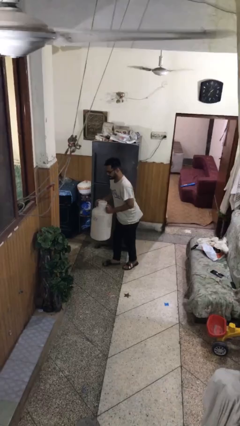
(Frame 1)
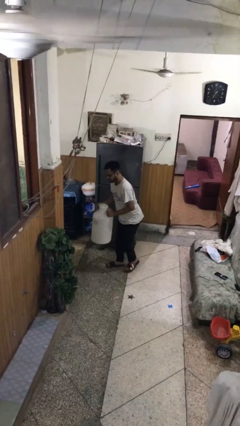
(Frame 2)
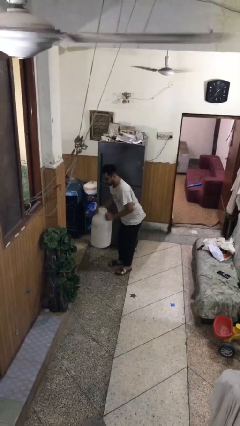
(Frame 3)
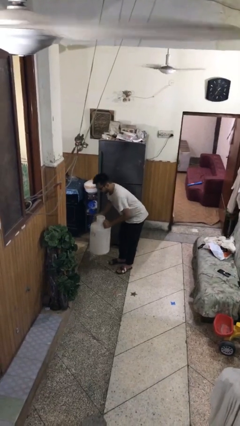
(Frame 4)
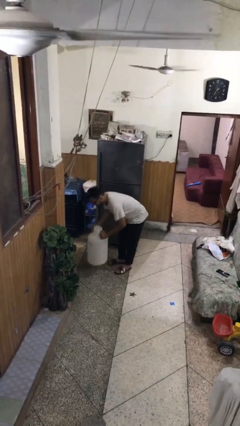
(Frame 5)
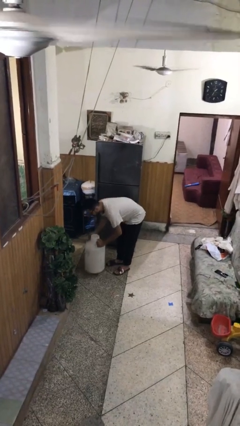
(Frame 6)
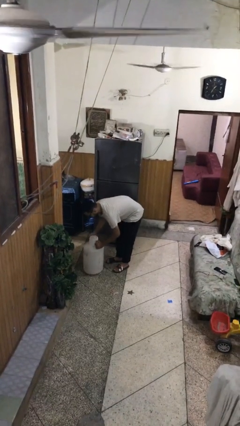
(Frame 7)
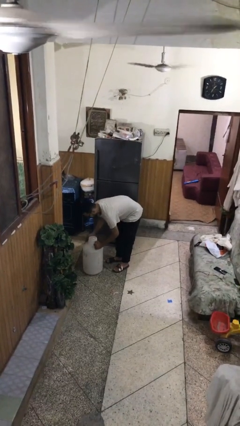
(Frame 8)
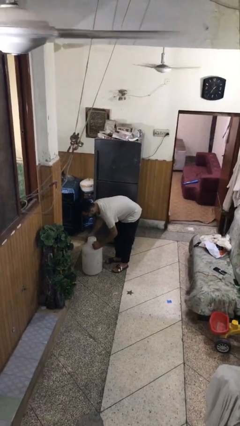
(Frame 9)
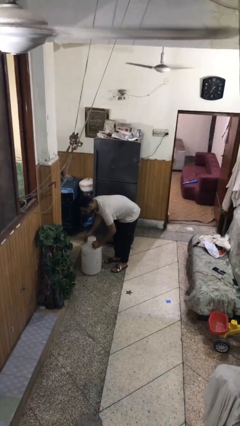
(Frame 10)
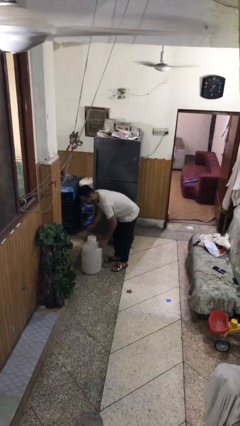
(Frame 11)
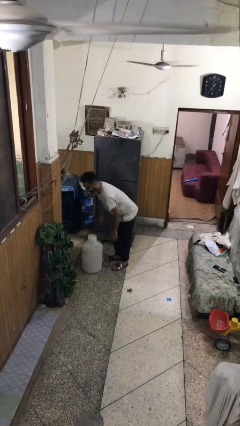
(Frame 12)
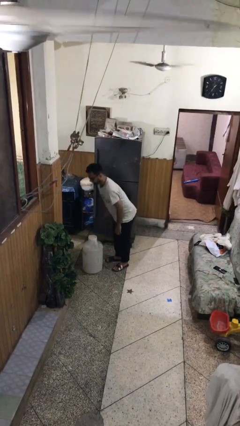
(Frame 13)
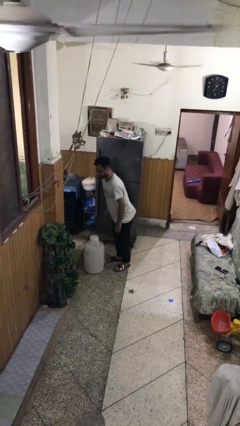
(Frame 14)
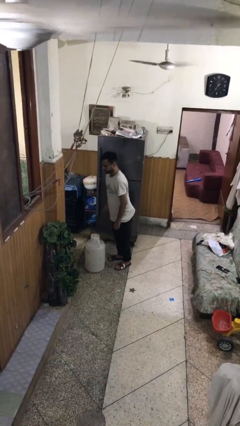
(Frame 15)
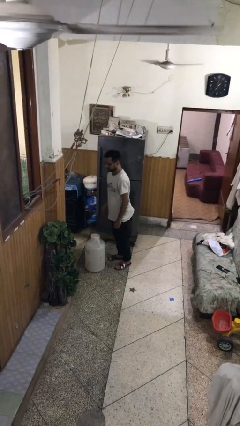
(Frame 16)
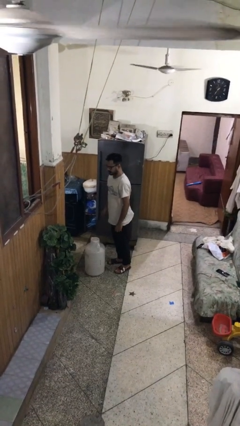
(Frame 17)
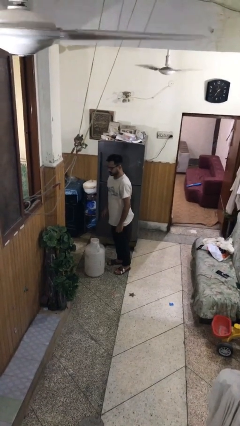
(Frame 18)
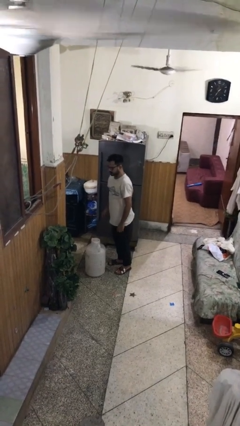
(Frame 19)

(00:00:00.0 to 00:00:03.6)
person puts down object on floor

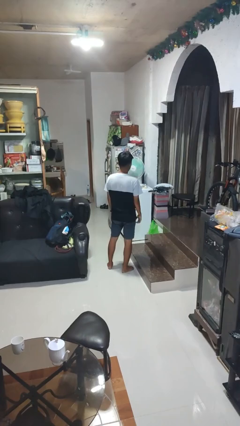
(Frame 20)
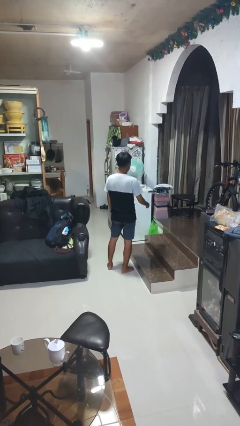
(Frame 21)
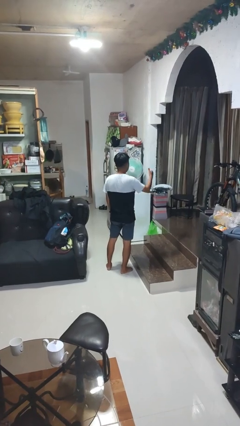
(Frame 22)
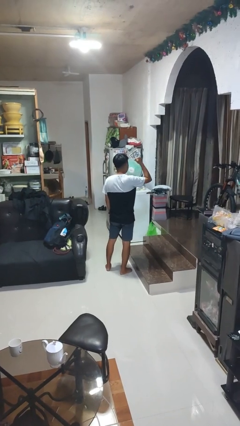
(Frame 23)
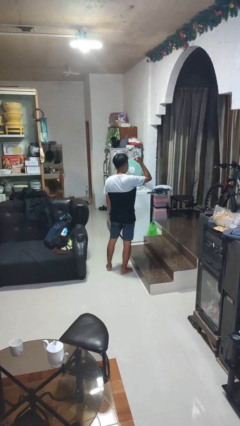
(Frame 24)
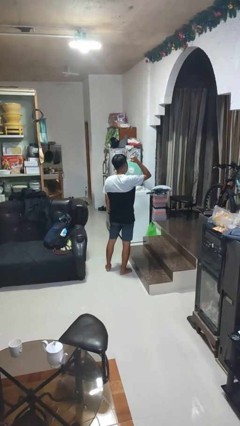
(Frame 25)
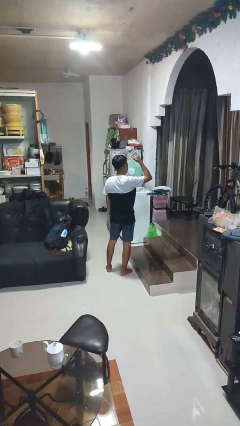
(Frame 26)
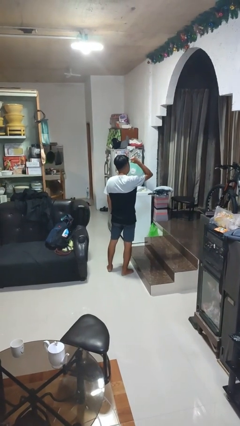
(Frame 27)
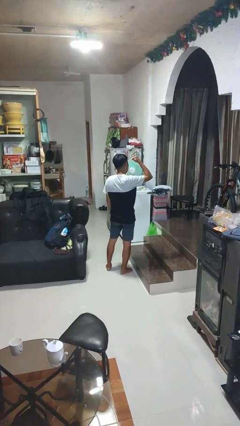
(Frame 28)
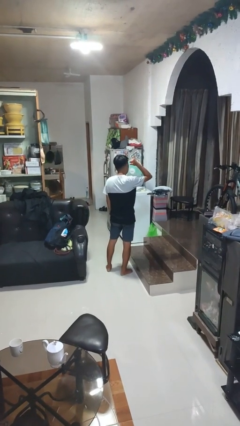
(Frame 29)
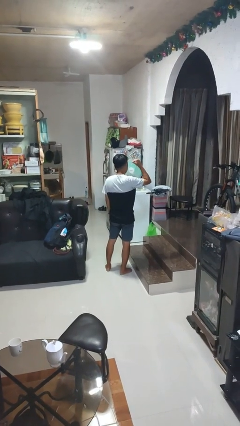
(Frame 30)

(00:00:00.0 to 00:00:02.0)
person gestures behind me

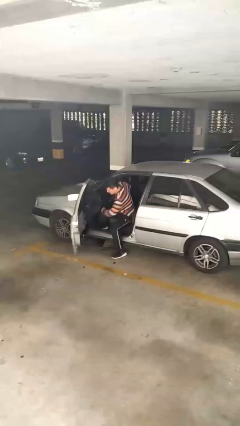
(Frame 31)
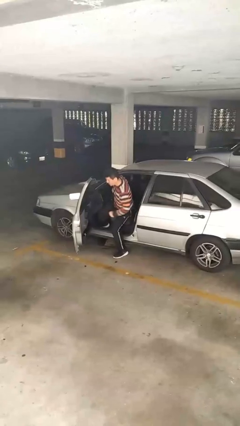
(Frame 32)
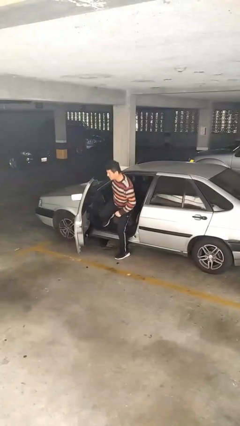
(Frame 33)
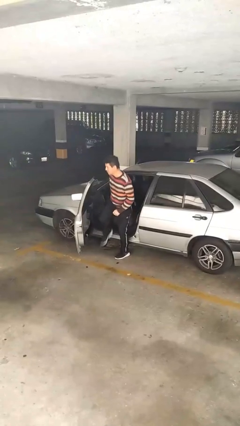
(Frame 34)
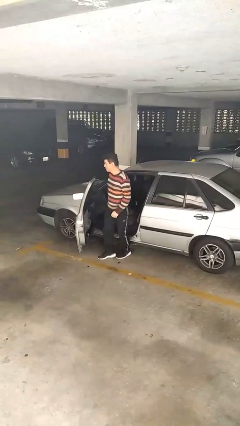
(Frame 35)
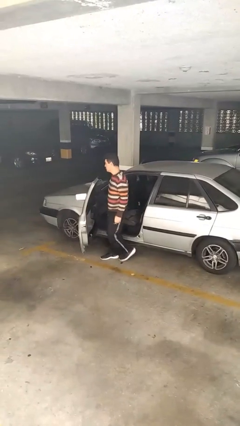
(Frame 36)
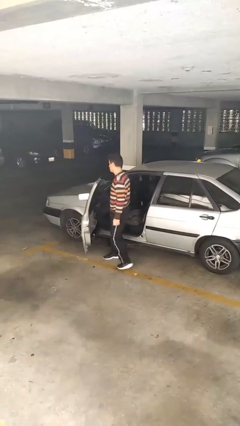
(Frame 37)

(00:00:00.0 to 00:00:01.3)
person exits car

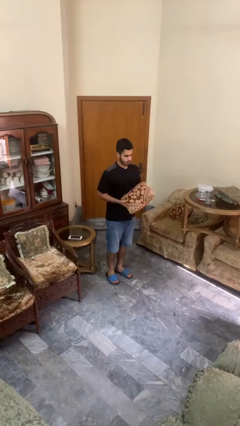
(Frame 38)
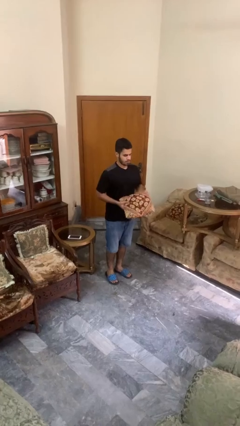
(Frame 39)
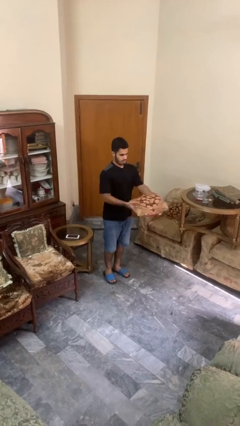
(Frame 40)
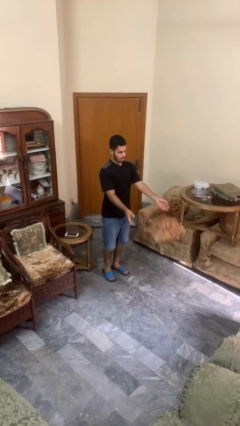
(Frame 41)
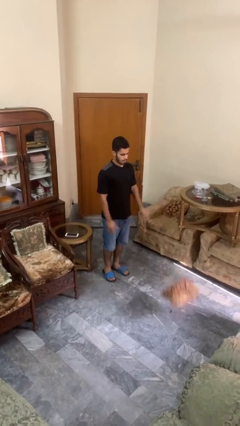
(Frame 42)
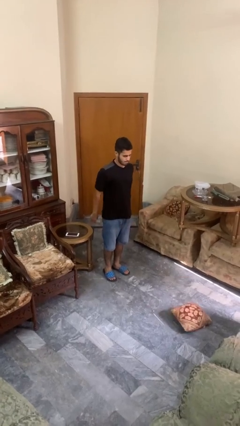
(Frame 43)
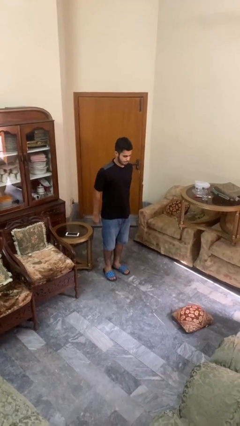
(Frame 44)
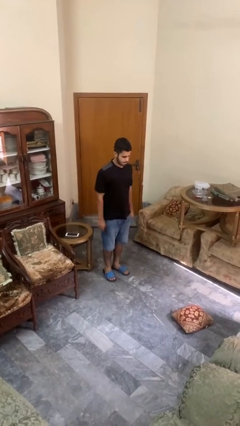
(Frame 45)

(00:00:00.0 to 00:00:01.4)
person throws object to ground

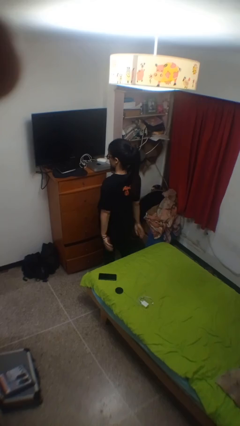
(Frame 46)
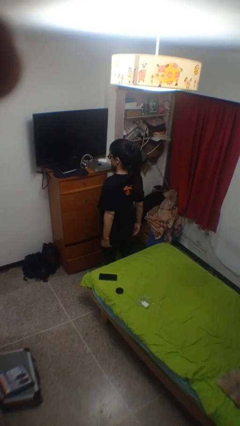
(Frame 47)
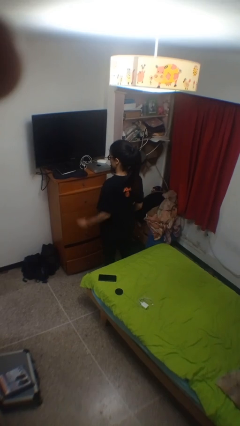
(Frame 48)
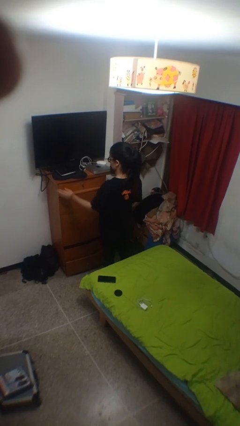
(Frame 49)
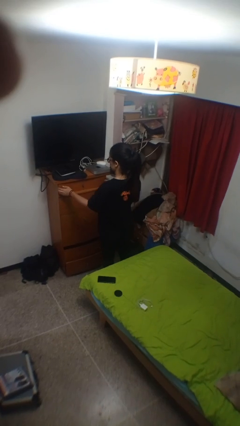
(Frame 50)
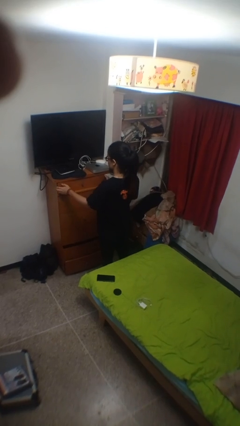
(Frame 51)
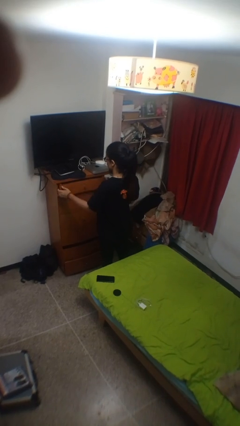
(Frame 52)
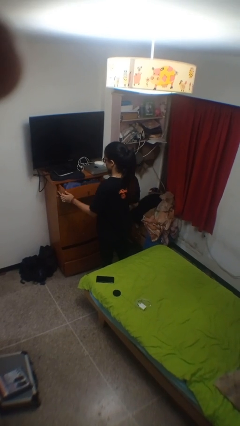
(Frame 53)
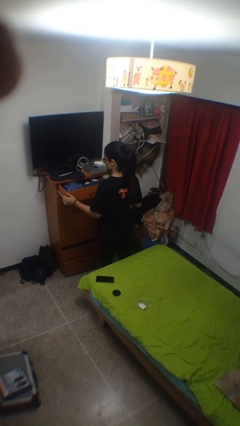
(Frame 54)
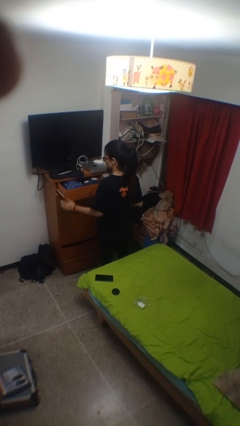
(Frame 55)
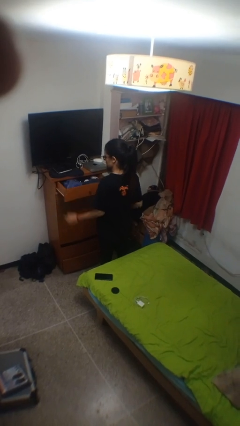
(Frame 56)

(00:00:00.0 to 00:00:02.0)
person opens dresser drawer

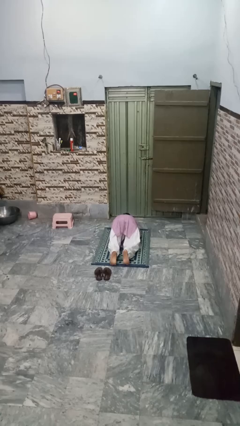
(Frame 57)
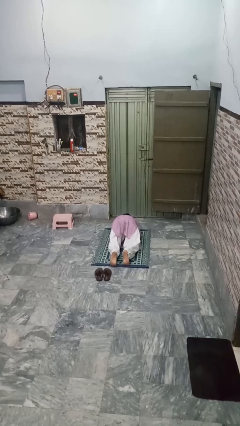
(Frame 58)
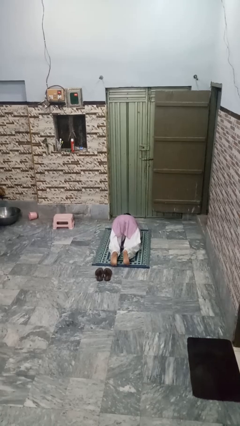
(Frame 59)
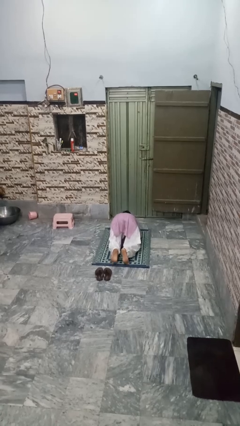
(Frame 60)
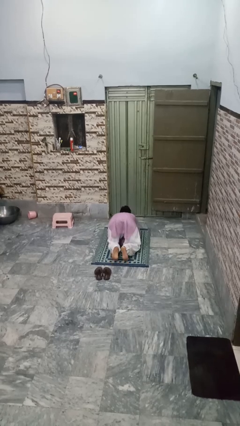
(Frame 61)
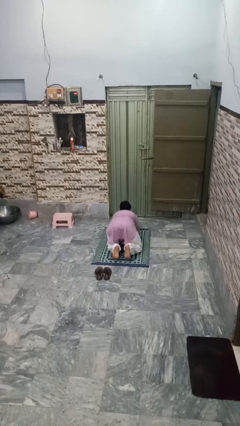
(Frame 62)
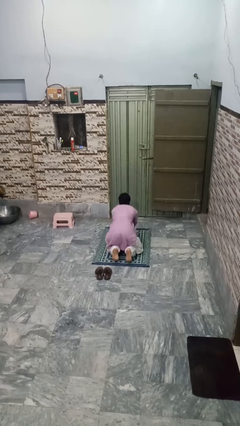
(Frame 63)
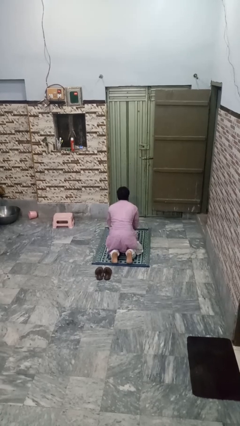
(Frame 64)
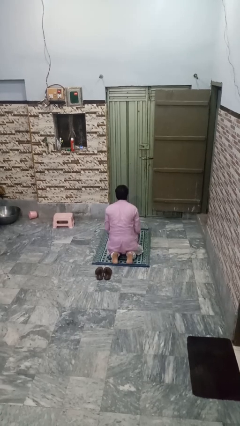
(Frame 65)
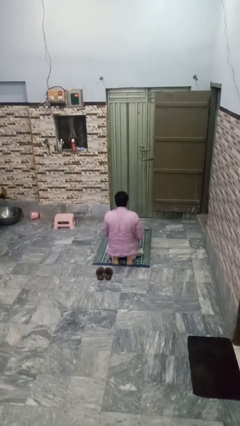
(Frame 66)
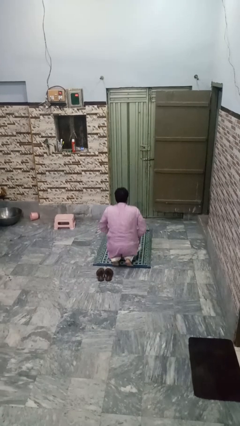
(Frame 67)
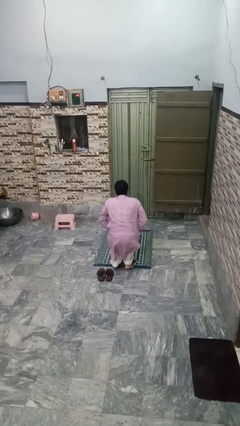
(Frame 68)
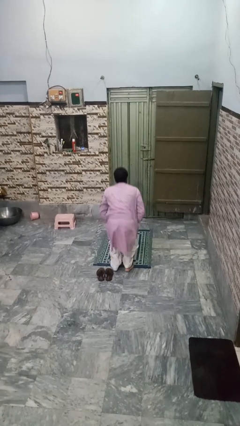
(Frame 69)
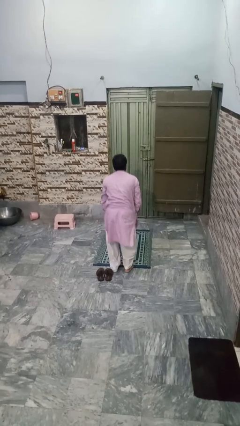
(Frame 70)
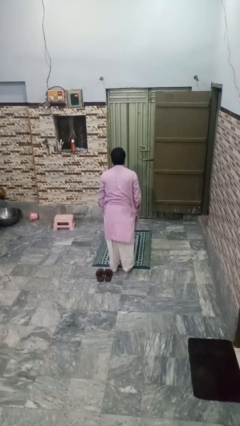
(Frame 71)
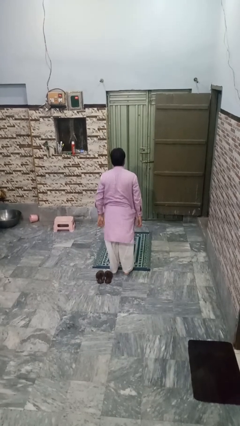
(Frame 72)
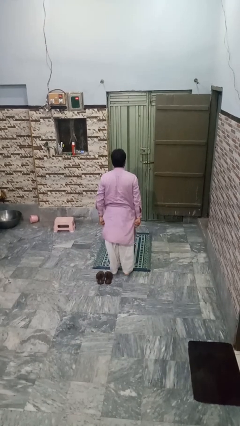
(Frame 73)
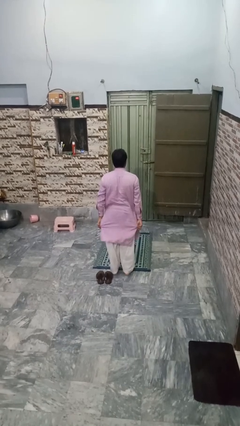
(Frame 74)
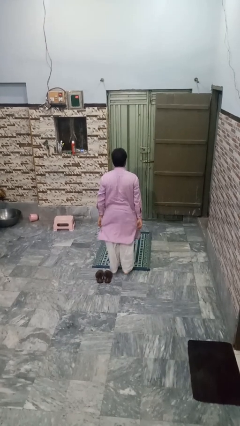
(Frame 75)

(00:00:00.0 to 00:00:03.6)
person stands up from floor

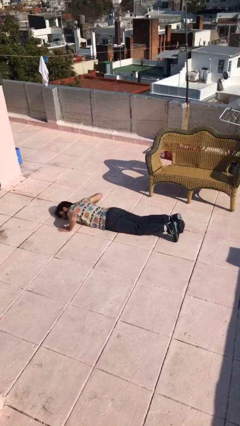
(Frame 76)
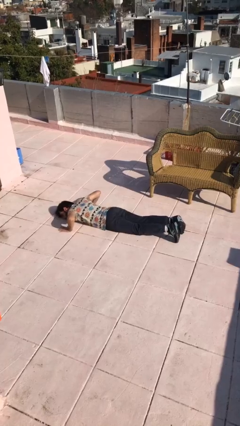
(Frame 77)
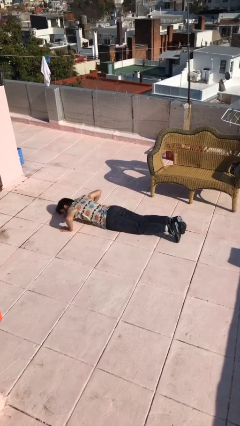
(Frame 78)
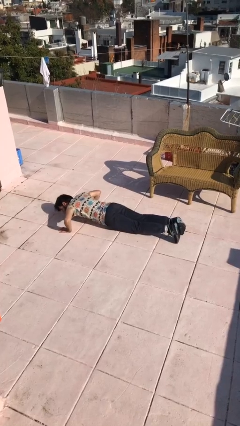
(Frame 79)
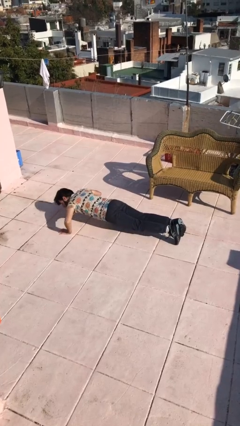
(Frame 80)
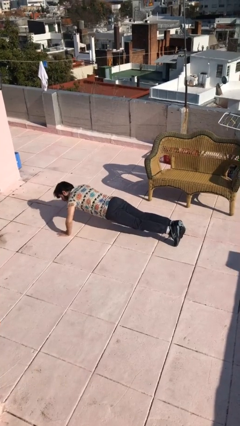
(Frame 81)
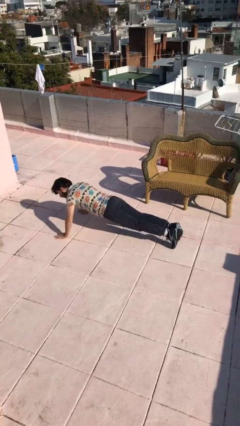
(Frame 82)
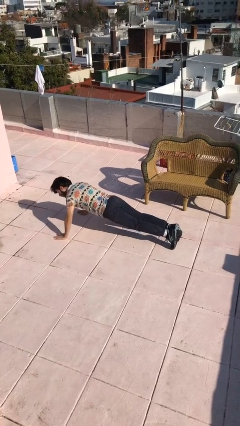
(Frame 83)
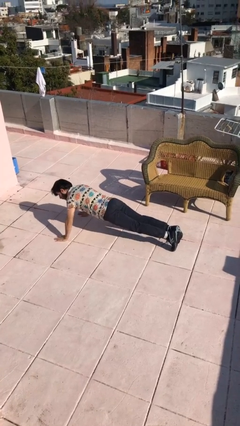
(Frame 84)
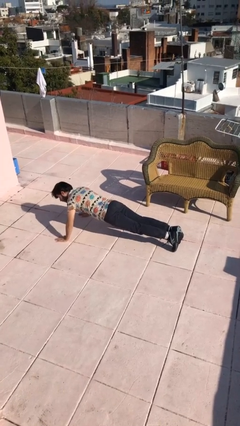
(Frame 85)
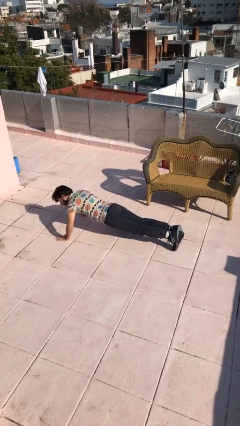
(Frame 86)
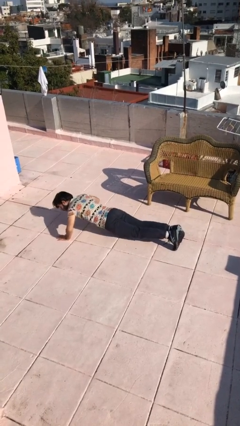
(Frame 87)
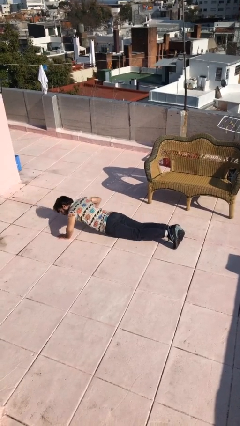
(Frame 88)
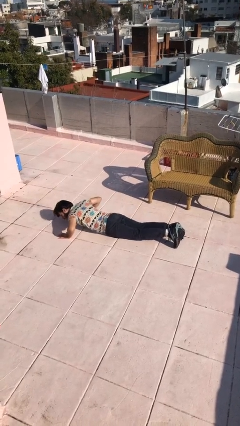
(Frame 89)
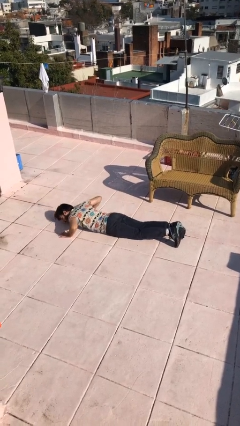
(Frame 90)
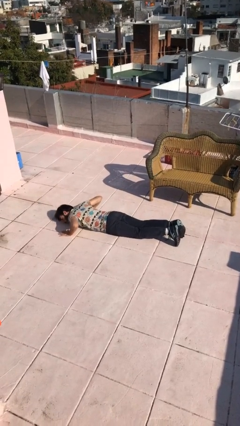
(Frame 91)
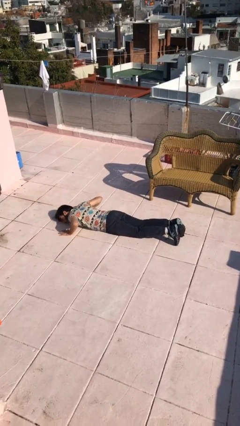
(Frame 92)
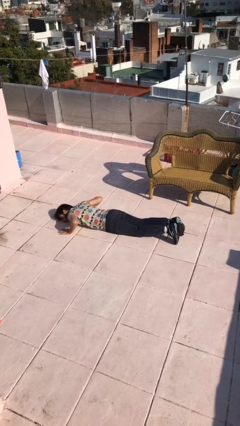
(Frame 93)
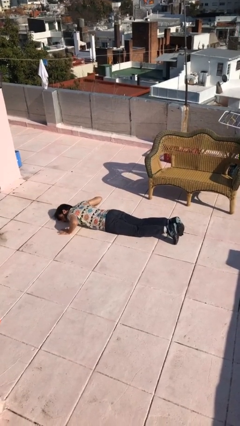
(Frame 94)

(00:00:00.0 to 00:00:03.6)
person exercises with pushup
